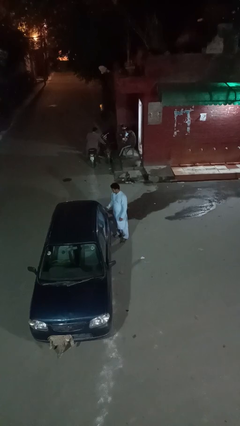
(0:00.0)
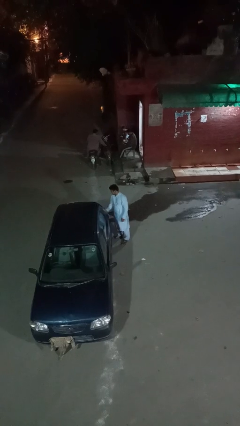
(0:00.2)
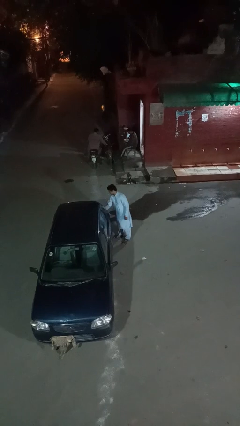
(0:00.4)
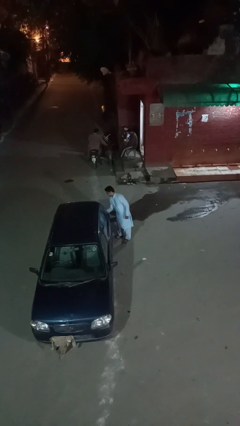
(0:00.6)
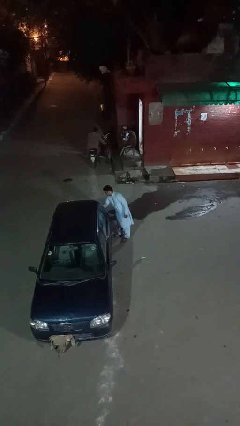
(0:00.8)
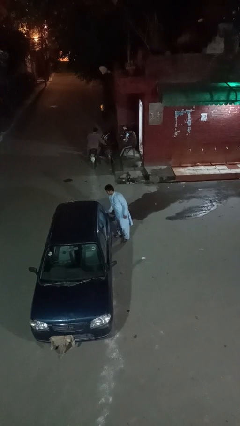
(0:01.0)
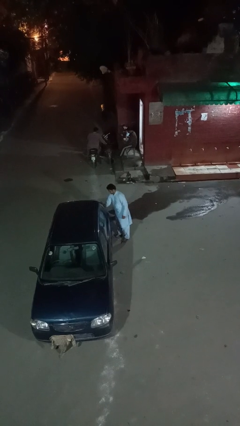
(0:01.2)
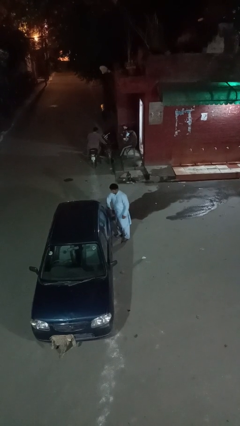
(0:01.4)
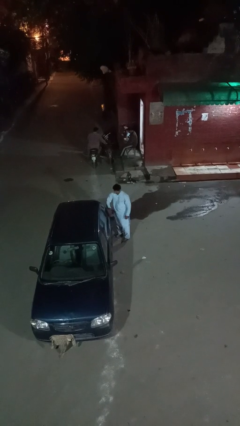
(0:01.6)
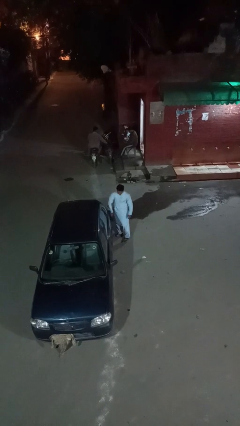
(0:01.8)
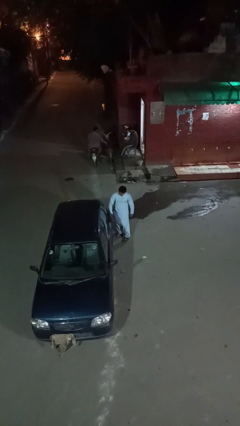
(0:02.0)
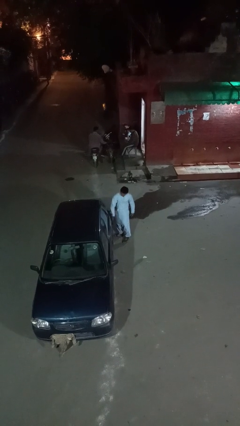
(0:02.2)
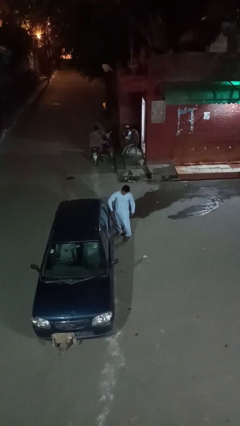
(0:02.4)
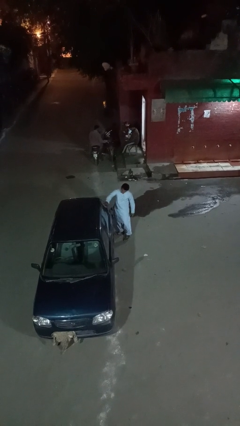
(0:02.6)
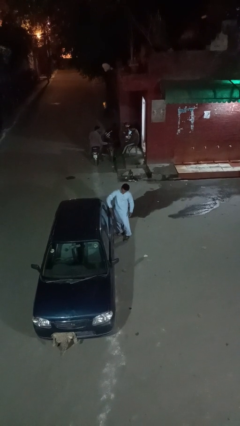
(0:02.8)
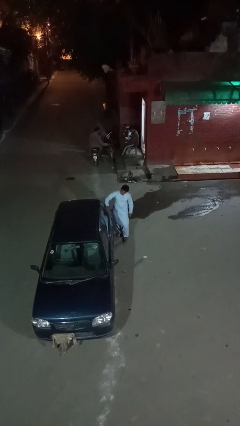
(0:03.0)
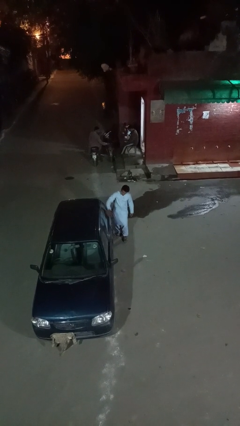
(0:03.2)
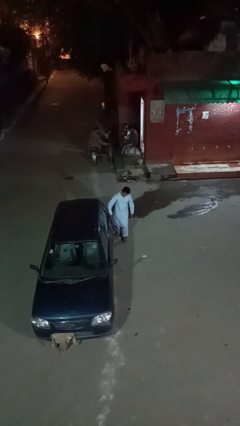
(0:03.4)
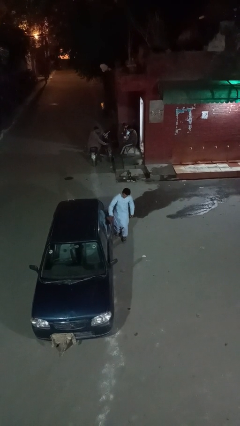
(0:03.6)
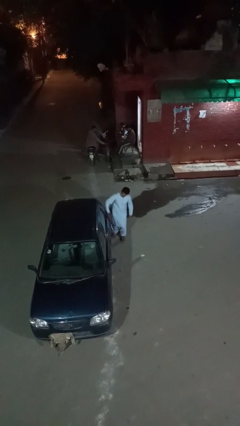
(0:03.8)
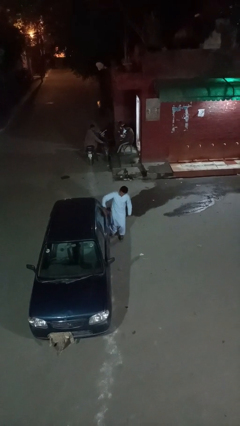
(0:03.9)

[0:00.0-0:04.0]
person polishes car with rag

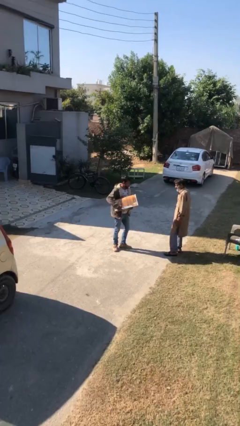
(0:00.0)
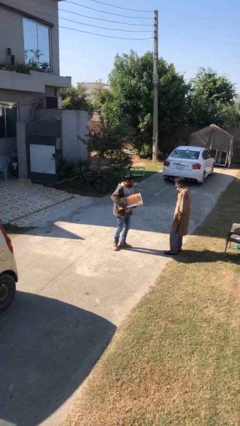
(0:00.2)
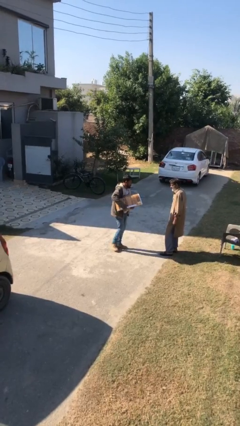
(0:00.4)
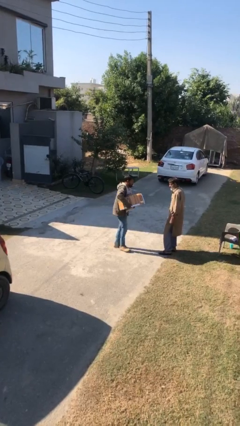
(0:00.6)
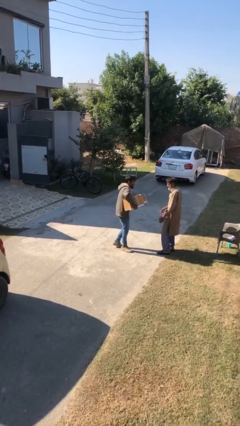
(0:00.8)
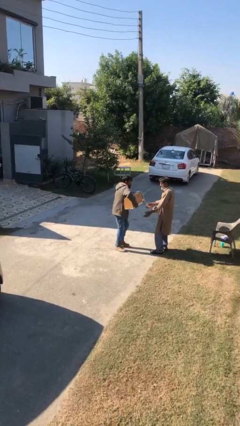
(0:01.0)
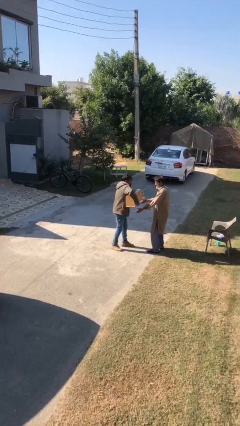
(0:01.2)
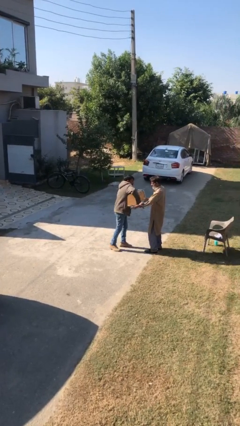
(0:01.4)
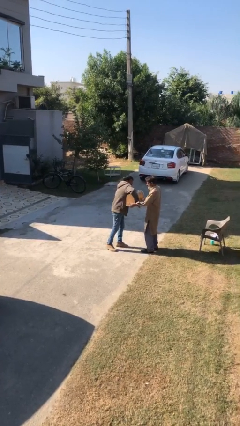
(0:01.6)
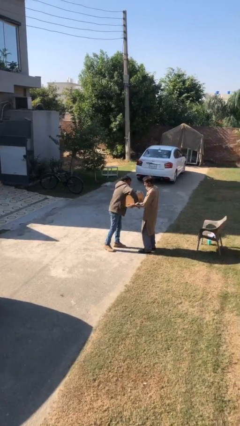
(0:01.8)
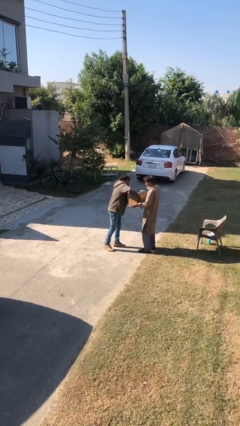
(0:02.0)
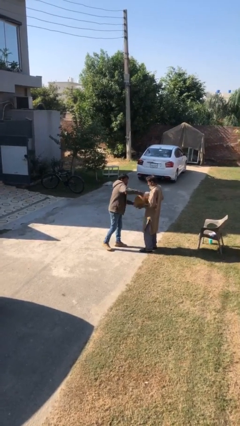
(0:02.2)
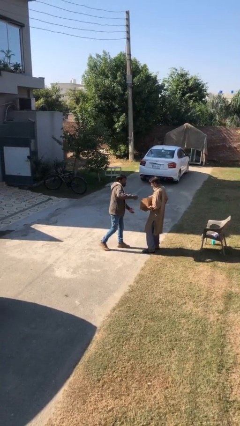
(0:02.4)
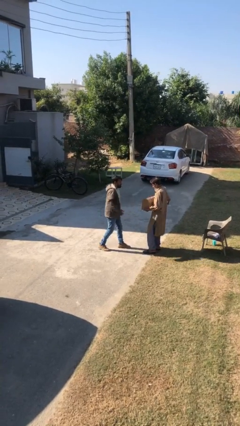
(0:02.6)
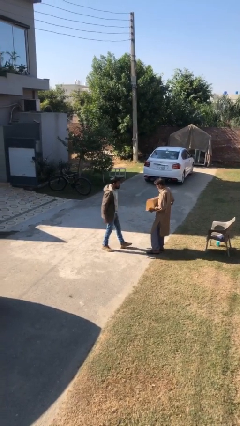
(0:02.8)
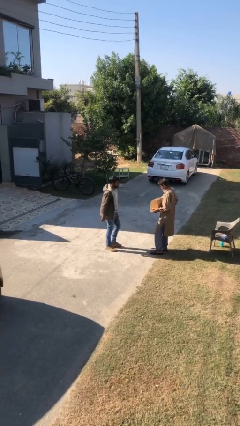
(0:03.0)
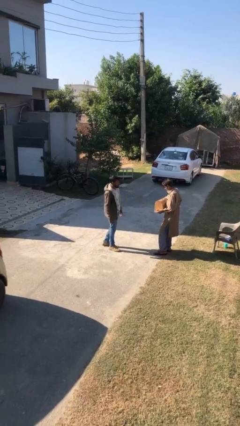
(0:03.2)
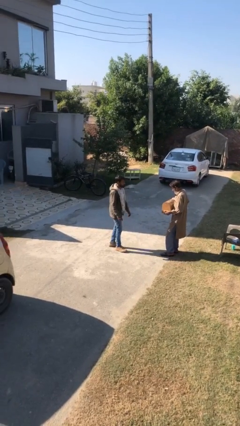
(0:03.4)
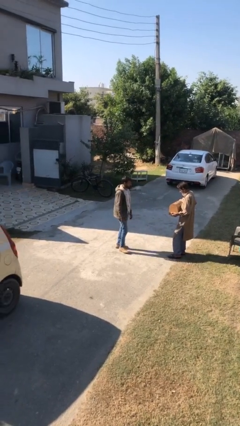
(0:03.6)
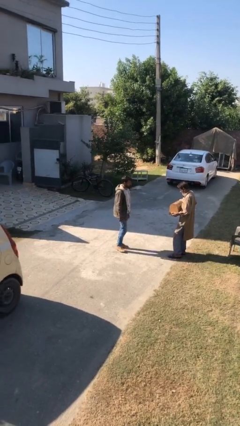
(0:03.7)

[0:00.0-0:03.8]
person transfers object to person

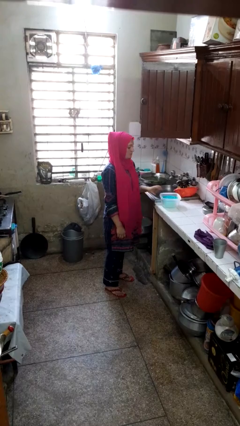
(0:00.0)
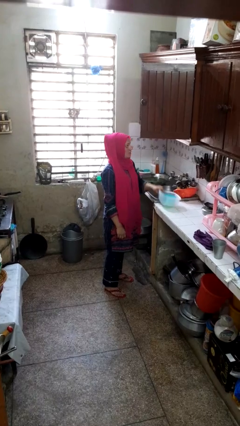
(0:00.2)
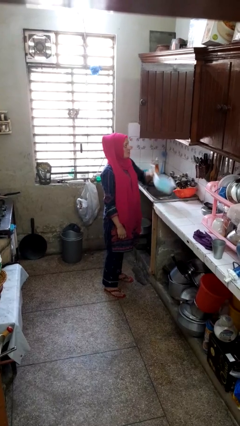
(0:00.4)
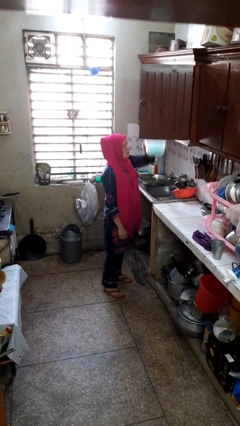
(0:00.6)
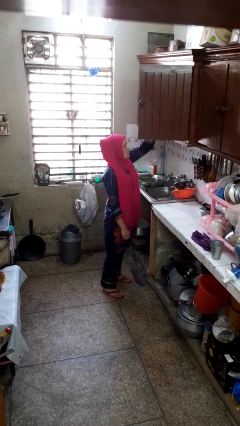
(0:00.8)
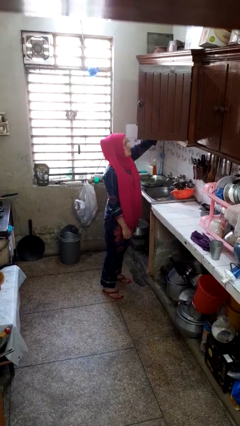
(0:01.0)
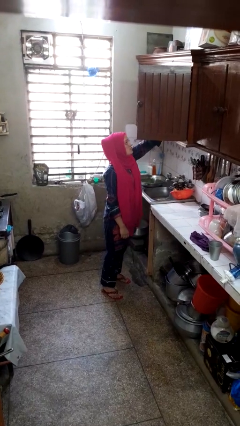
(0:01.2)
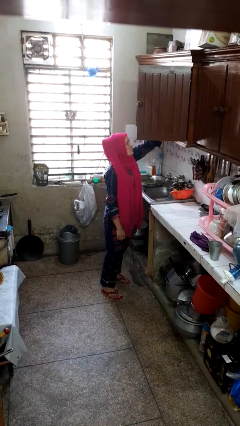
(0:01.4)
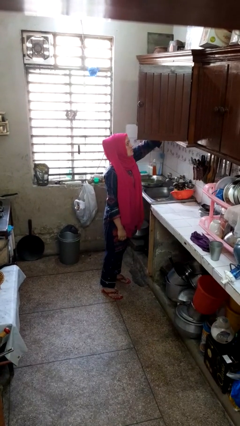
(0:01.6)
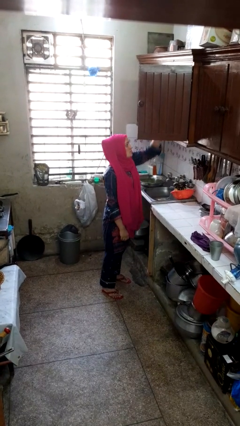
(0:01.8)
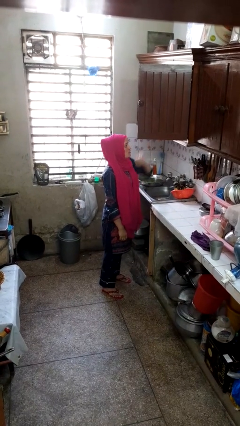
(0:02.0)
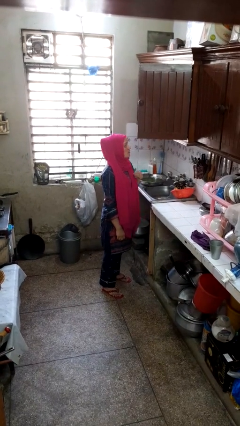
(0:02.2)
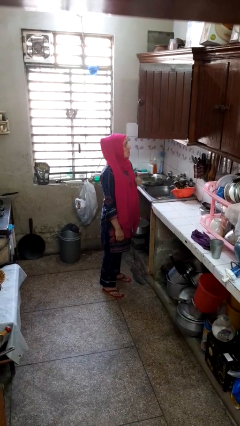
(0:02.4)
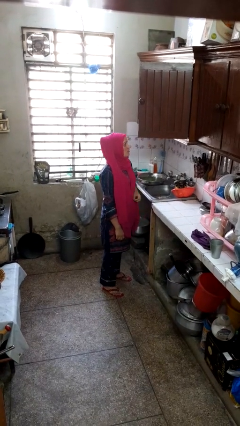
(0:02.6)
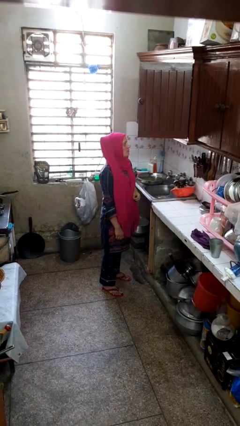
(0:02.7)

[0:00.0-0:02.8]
person puts object in cabinet

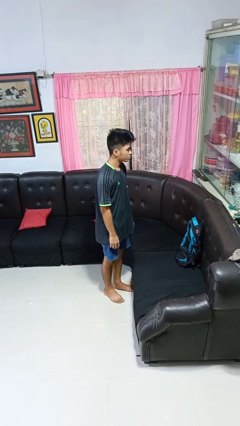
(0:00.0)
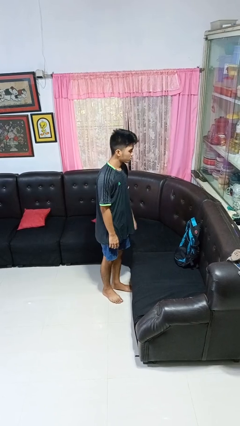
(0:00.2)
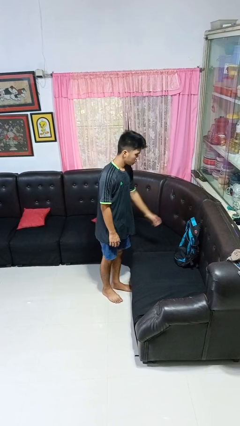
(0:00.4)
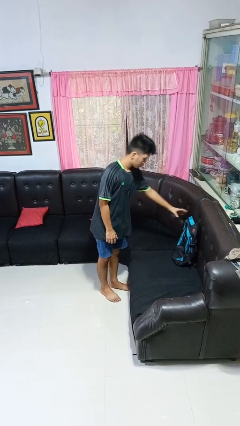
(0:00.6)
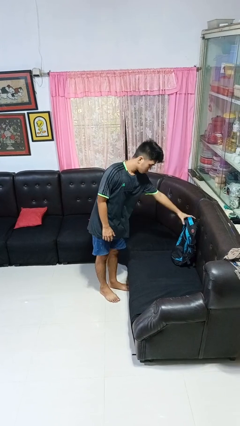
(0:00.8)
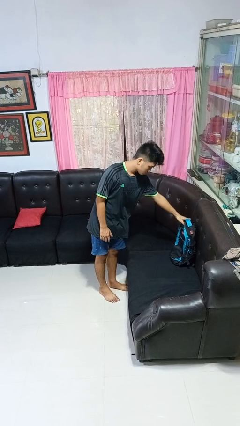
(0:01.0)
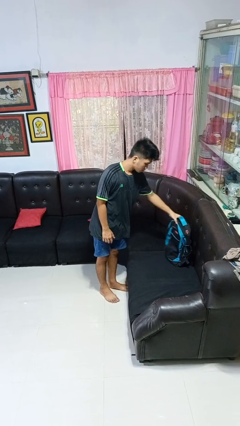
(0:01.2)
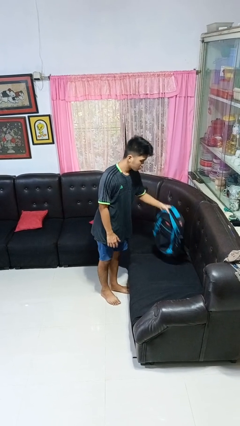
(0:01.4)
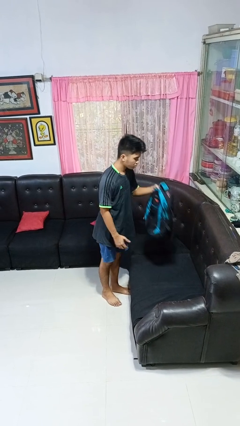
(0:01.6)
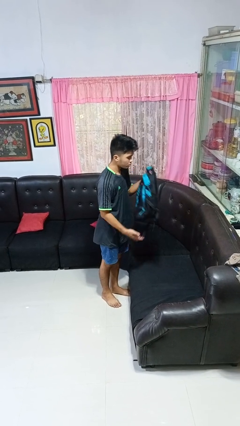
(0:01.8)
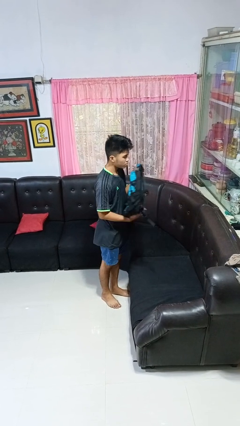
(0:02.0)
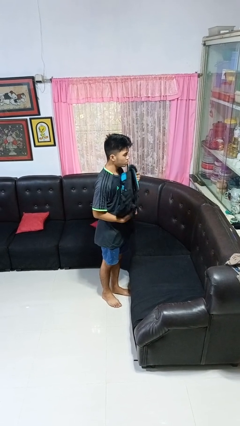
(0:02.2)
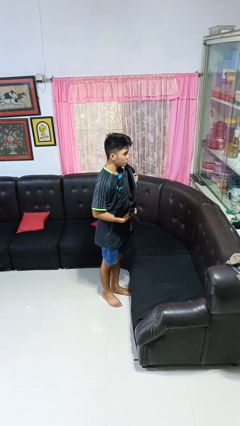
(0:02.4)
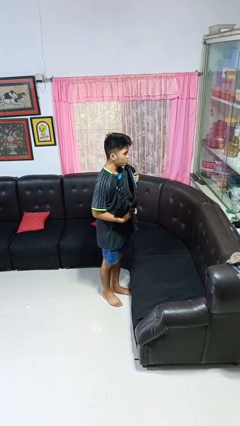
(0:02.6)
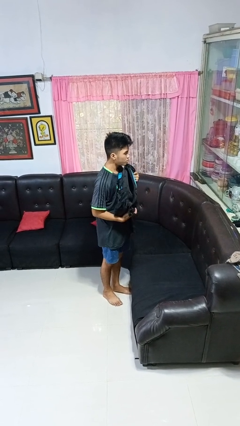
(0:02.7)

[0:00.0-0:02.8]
person picks up object from couch

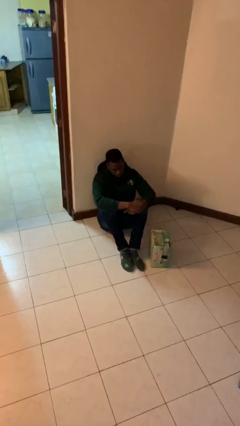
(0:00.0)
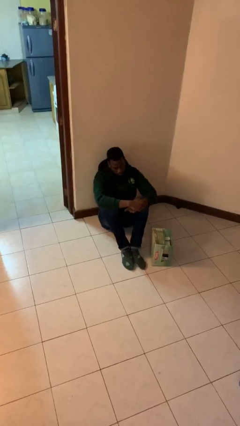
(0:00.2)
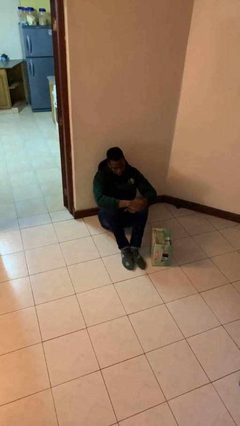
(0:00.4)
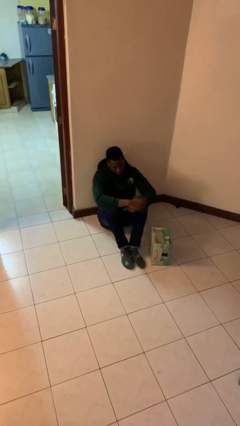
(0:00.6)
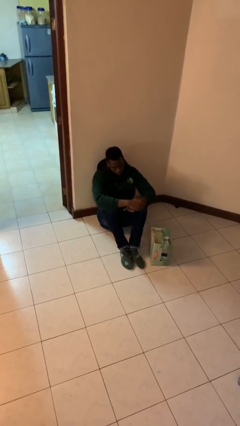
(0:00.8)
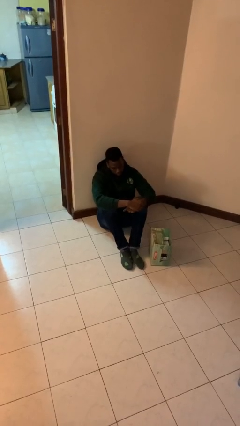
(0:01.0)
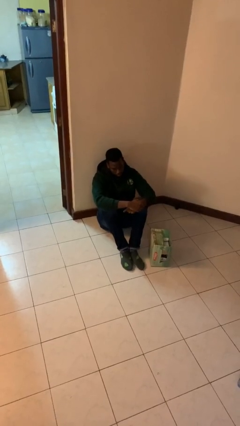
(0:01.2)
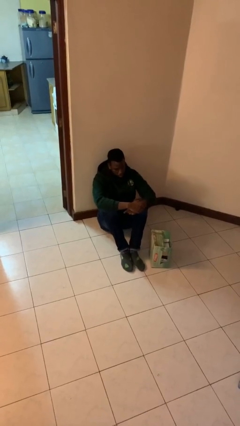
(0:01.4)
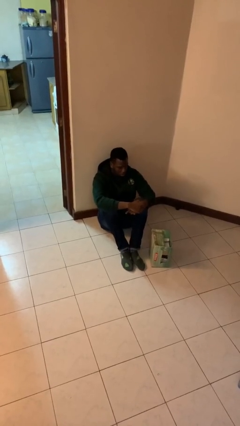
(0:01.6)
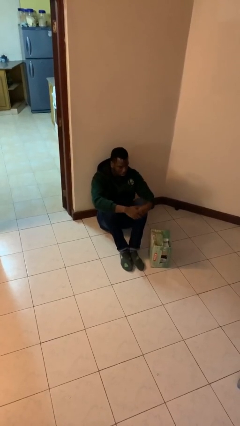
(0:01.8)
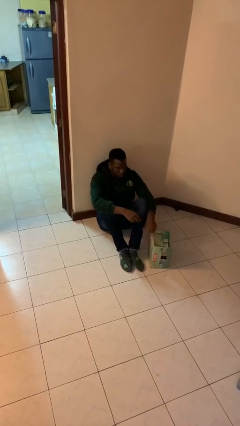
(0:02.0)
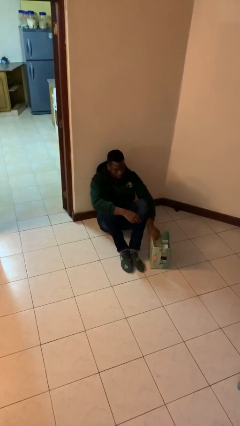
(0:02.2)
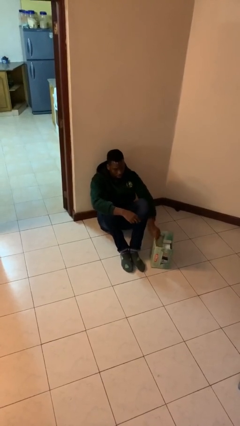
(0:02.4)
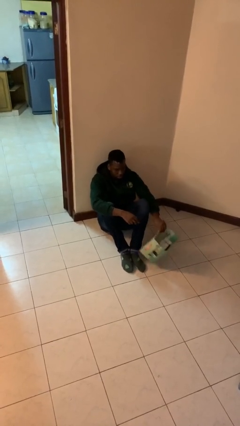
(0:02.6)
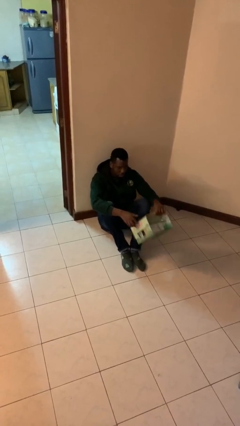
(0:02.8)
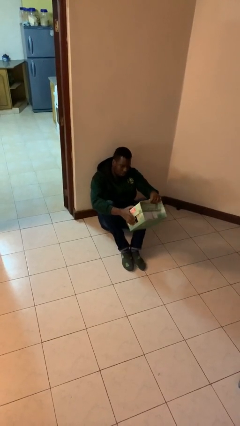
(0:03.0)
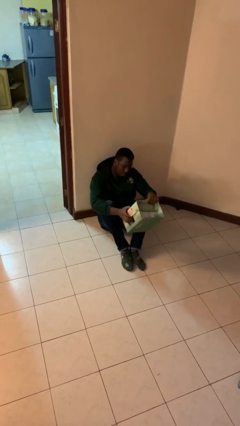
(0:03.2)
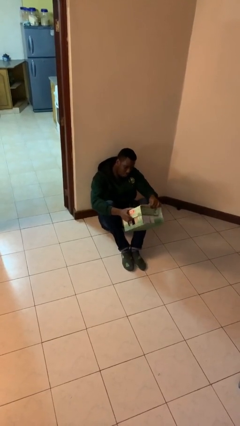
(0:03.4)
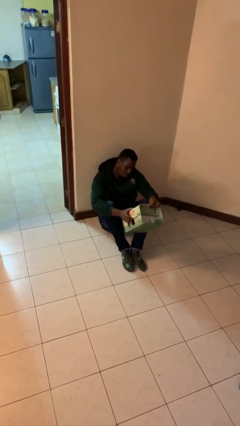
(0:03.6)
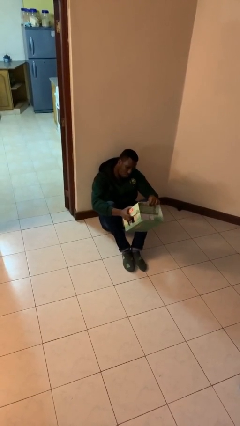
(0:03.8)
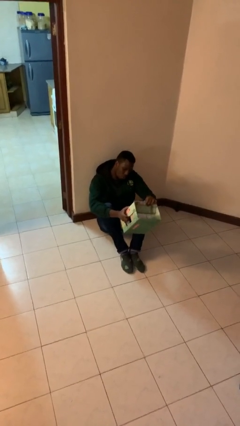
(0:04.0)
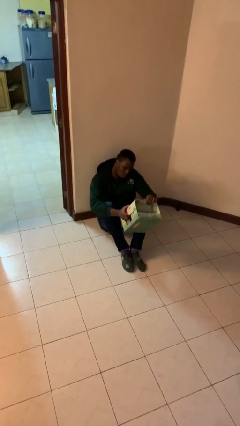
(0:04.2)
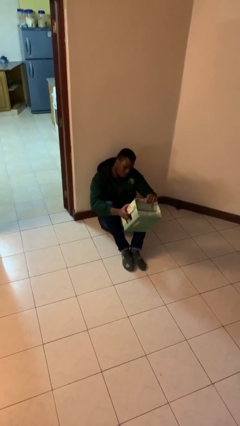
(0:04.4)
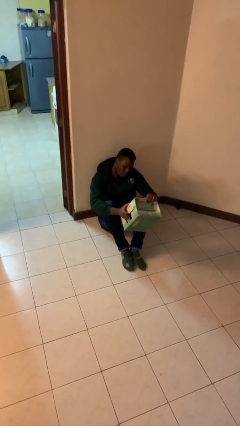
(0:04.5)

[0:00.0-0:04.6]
person picks up object from floor
